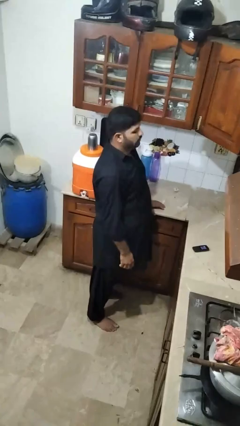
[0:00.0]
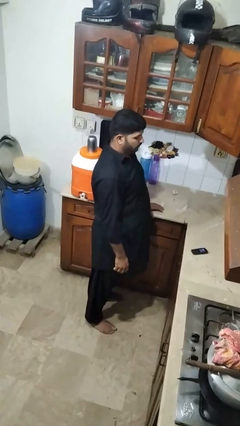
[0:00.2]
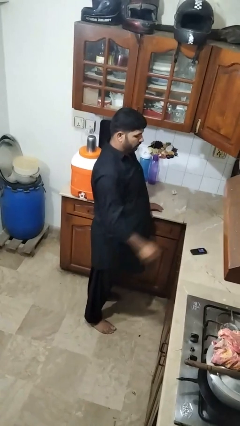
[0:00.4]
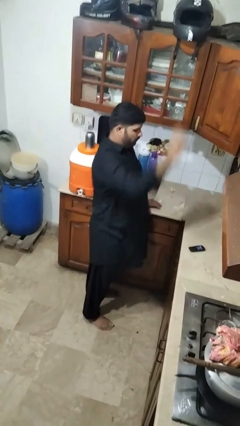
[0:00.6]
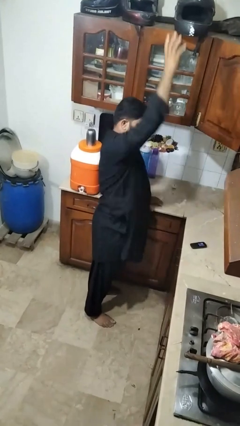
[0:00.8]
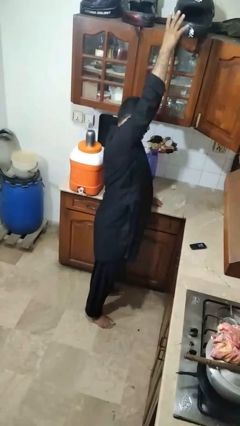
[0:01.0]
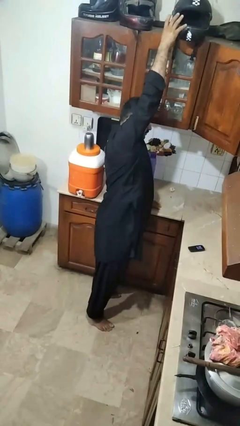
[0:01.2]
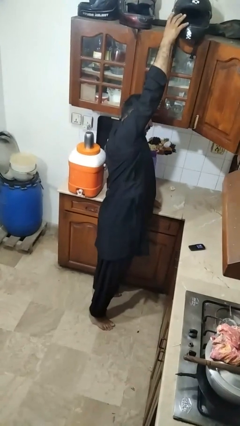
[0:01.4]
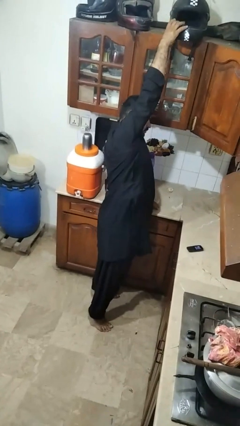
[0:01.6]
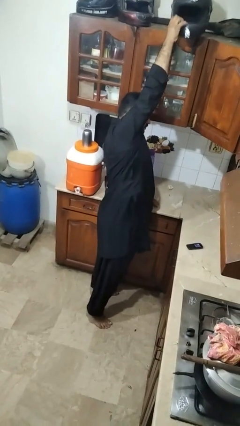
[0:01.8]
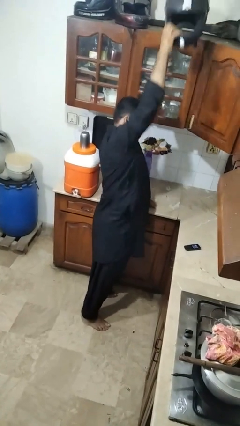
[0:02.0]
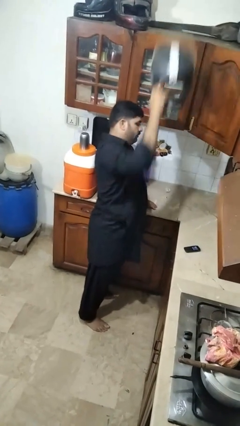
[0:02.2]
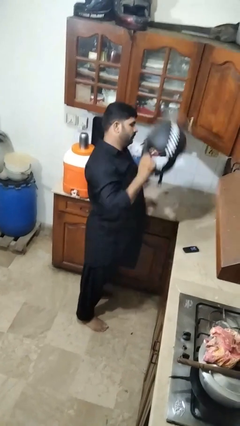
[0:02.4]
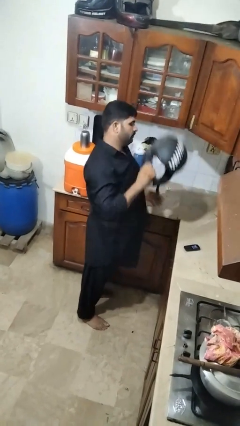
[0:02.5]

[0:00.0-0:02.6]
person picks up object from shelf

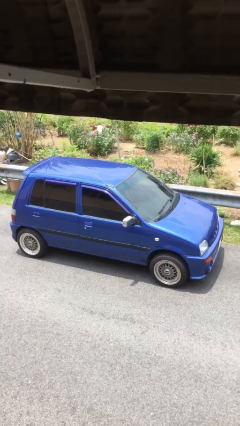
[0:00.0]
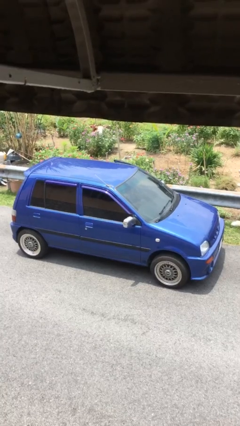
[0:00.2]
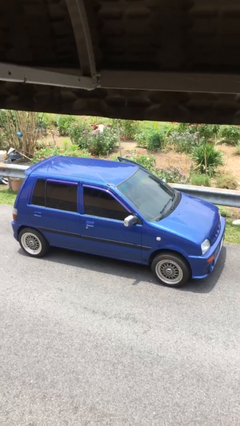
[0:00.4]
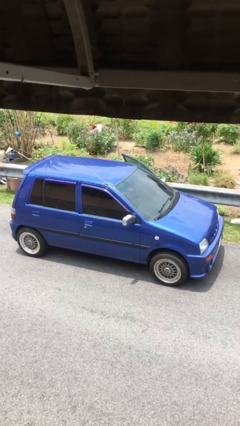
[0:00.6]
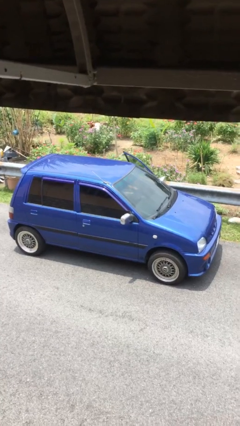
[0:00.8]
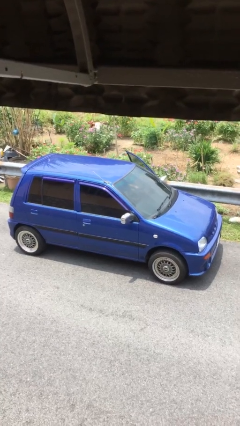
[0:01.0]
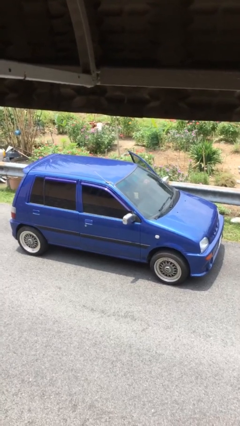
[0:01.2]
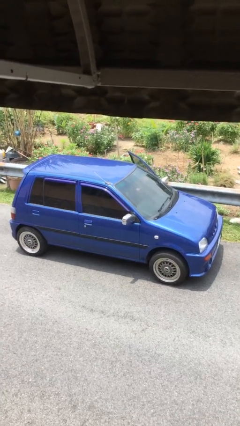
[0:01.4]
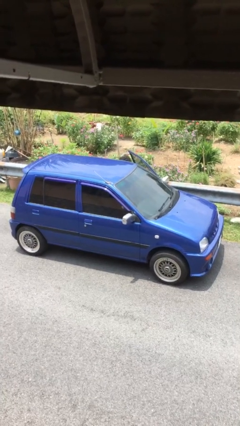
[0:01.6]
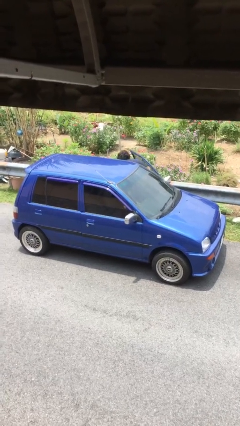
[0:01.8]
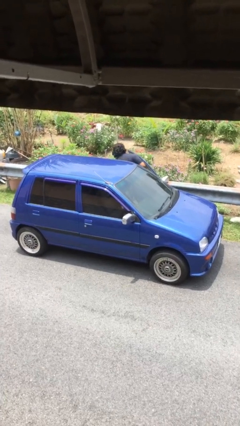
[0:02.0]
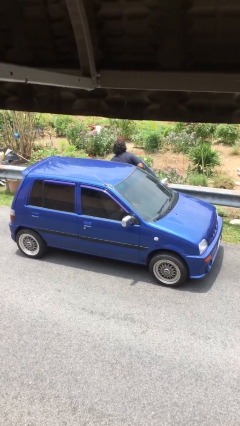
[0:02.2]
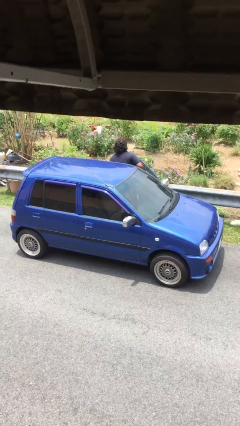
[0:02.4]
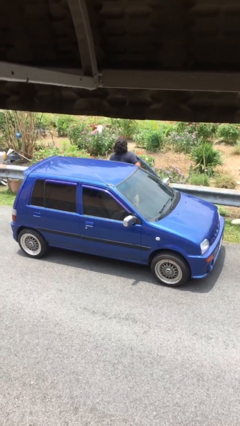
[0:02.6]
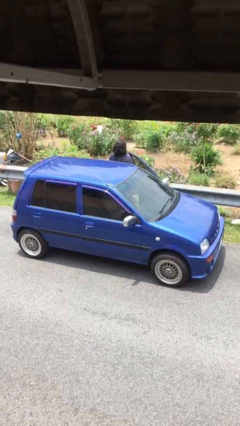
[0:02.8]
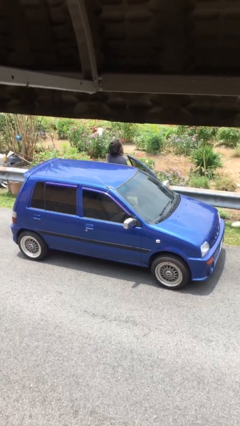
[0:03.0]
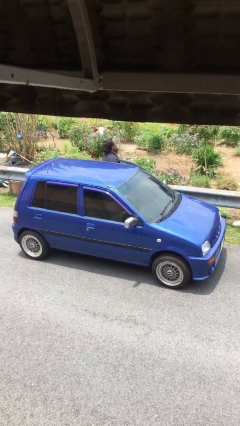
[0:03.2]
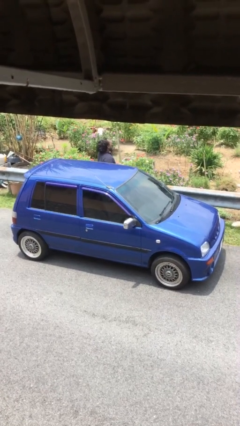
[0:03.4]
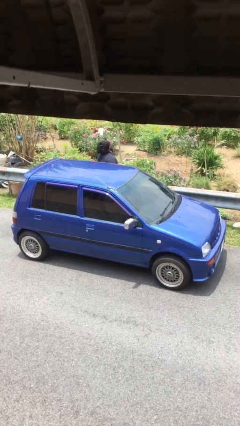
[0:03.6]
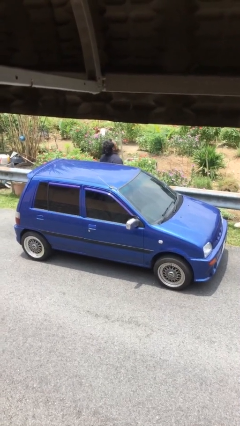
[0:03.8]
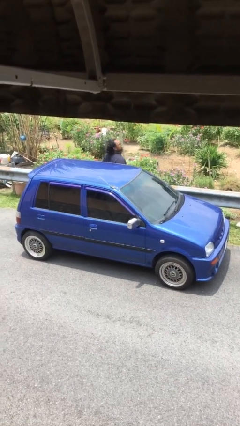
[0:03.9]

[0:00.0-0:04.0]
car drops off person

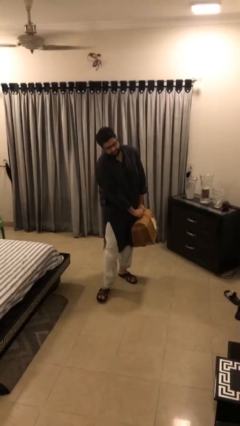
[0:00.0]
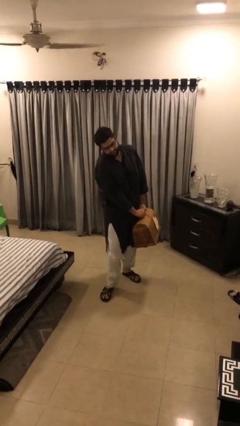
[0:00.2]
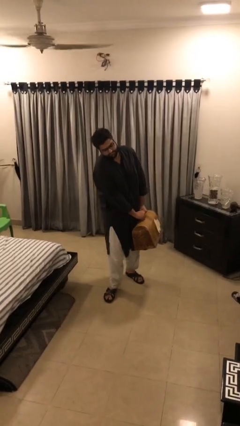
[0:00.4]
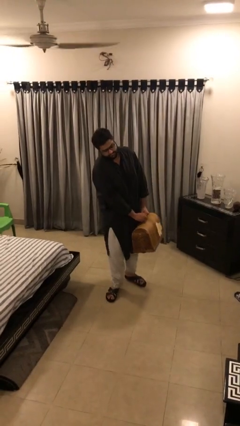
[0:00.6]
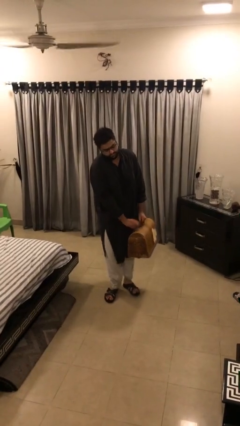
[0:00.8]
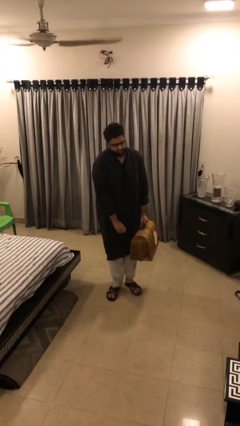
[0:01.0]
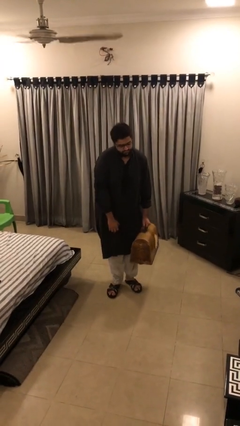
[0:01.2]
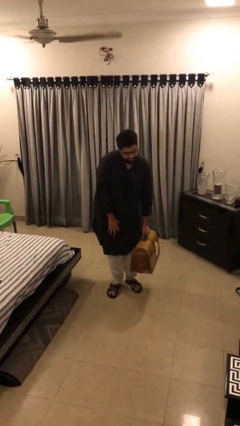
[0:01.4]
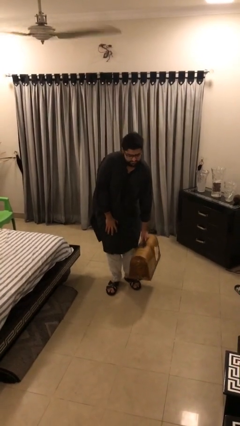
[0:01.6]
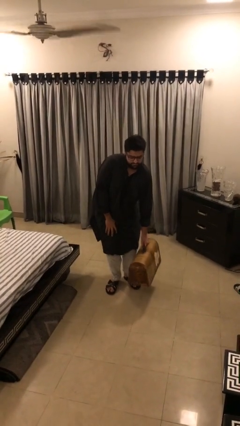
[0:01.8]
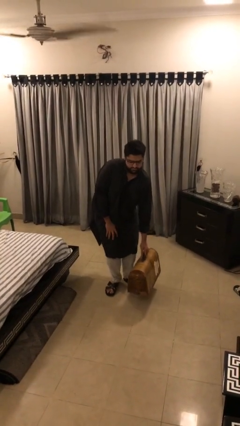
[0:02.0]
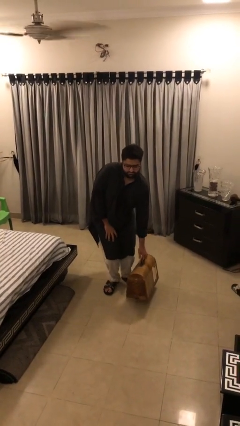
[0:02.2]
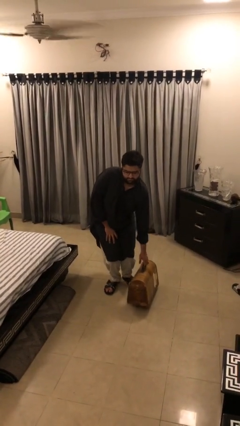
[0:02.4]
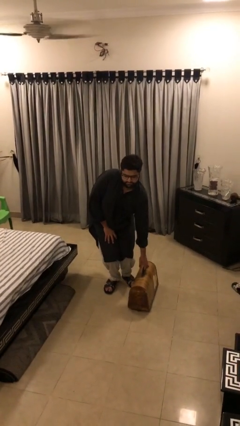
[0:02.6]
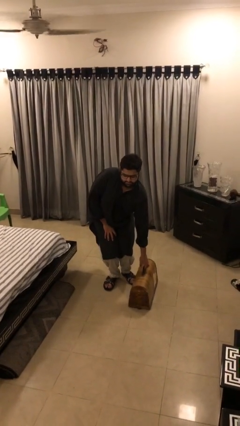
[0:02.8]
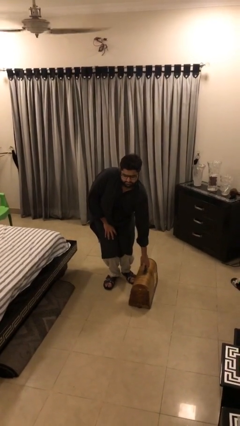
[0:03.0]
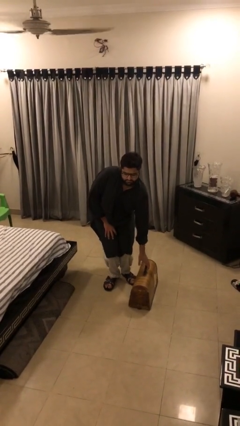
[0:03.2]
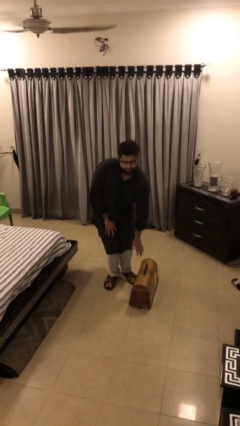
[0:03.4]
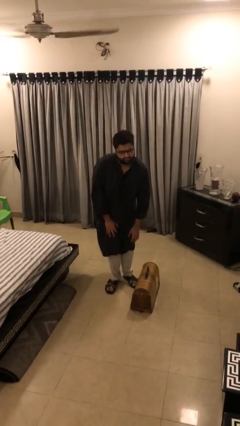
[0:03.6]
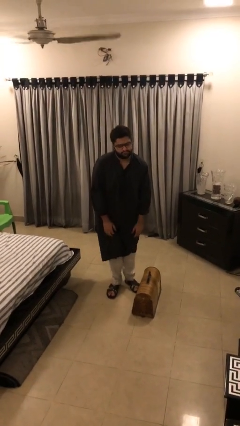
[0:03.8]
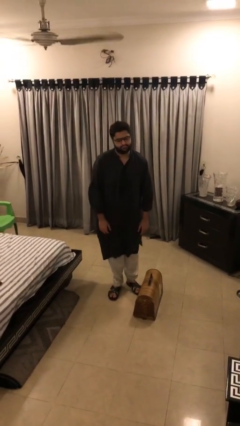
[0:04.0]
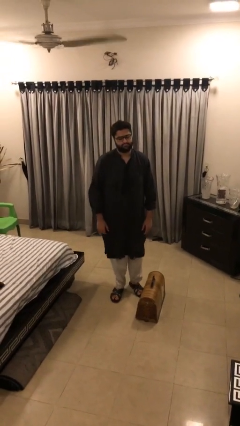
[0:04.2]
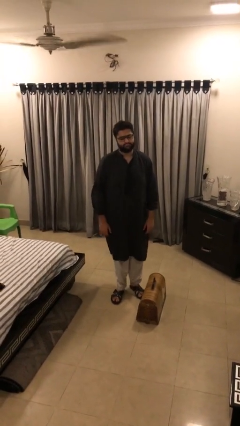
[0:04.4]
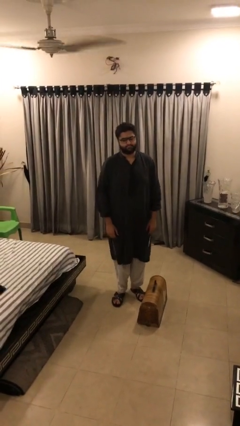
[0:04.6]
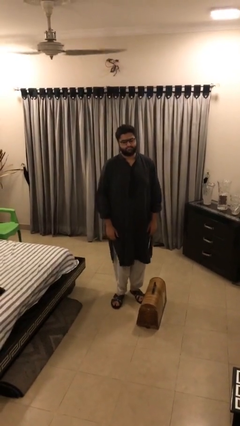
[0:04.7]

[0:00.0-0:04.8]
person puts down object on floor

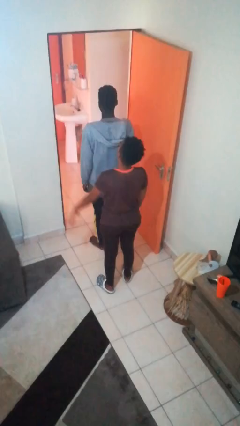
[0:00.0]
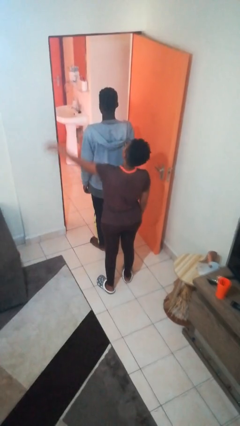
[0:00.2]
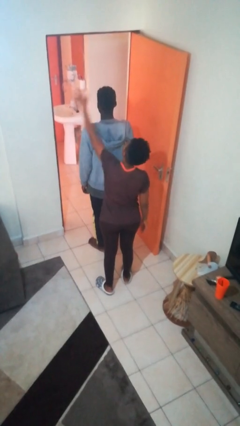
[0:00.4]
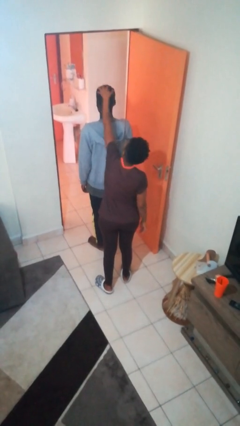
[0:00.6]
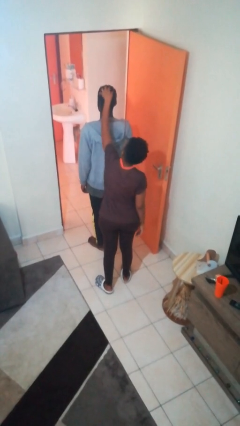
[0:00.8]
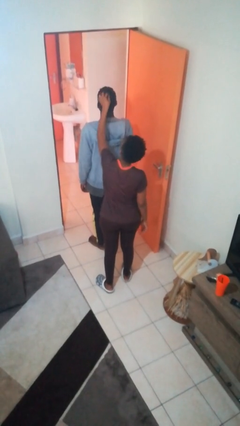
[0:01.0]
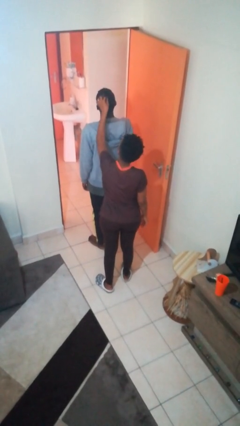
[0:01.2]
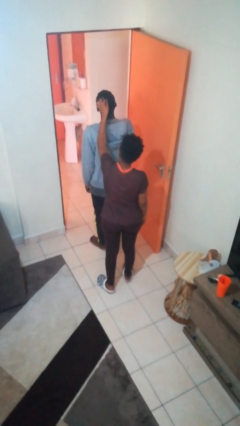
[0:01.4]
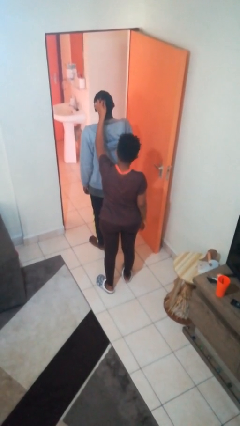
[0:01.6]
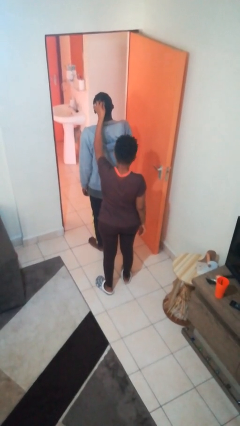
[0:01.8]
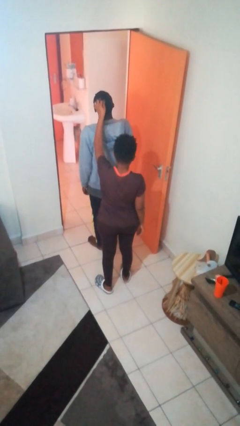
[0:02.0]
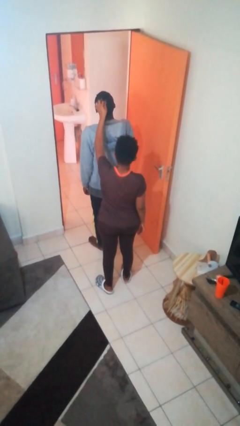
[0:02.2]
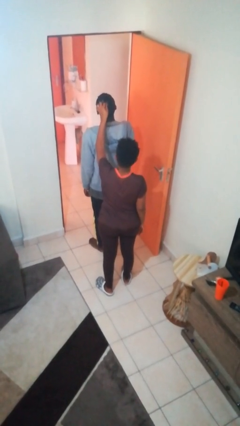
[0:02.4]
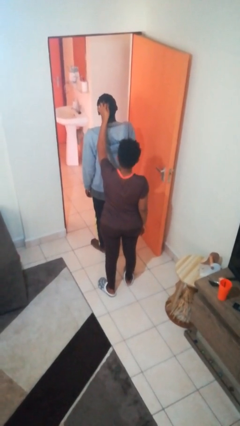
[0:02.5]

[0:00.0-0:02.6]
person grabs person by hair

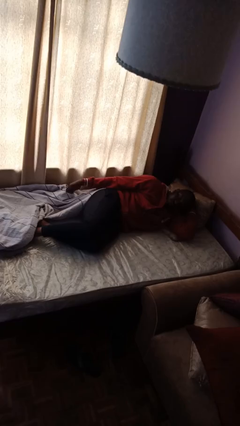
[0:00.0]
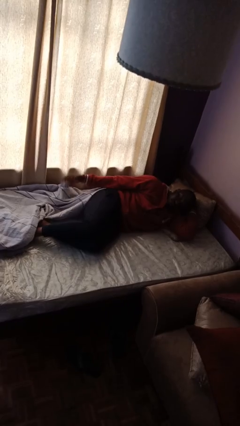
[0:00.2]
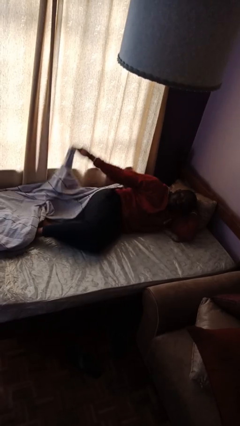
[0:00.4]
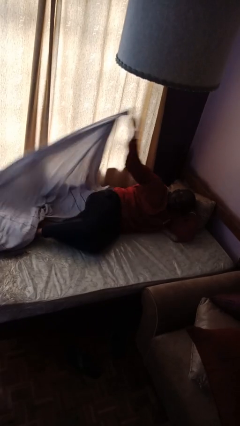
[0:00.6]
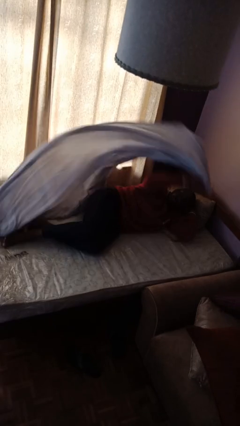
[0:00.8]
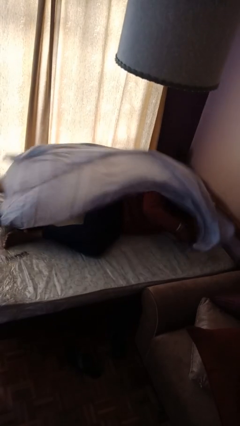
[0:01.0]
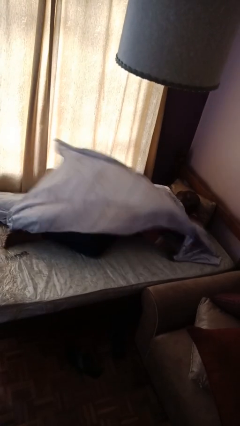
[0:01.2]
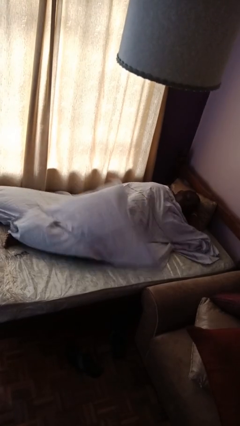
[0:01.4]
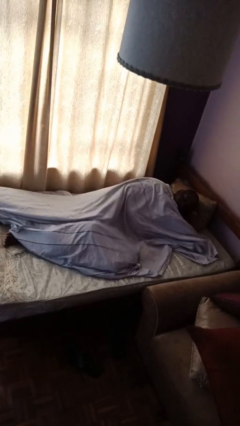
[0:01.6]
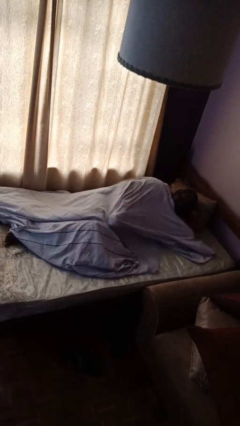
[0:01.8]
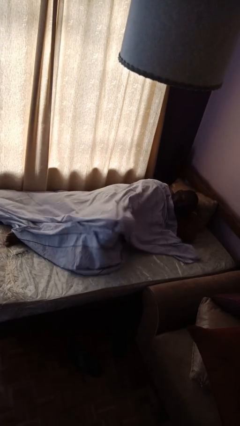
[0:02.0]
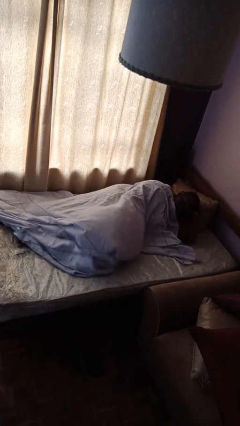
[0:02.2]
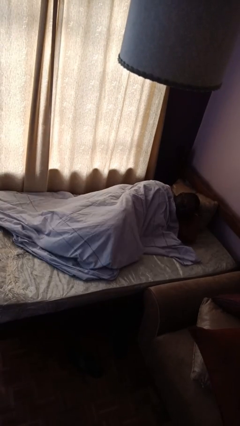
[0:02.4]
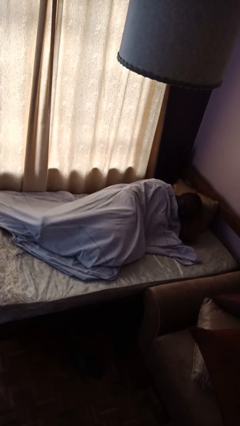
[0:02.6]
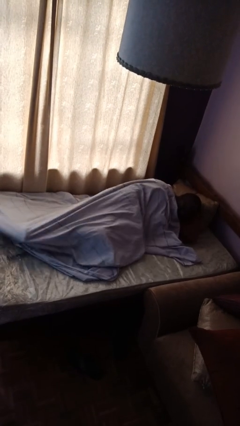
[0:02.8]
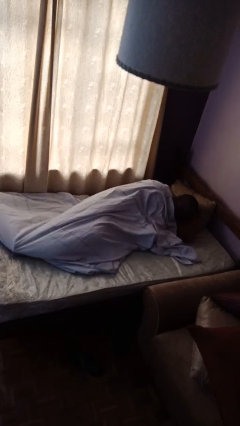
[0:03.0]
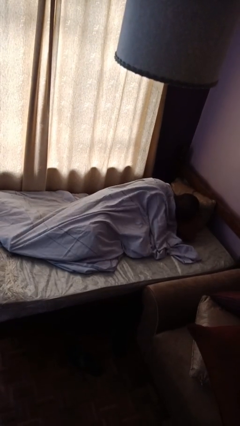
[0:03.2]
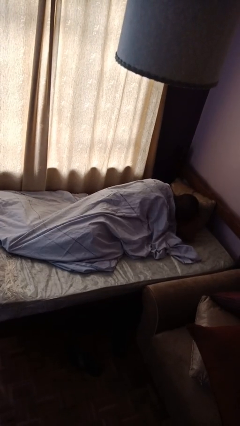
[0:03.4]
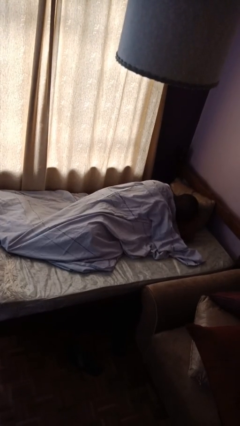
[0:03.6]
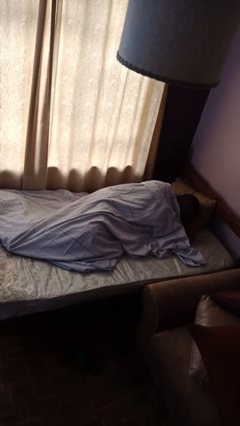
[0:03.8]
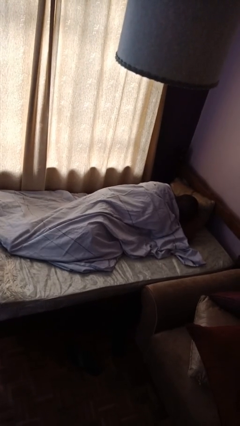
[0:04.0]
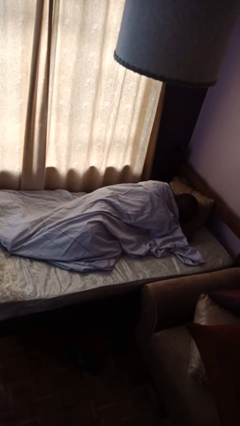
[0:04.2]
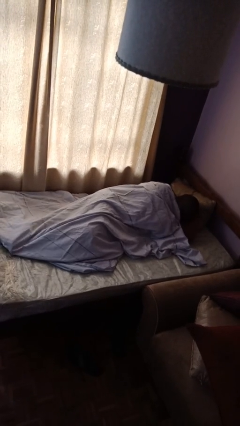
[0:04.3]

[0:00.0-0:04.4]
person covers with bedsheets
